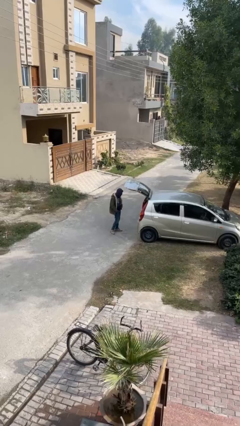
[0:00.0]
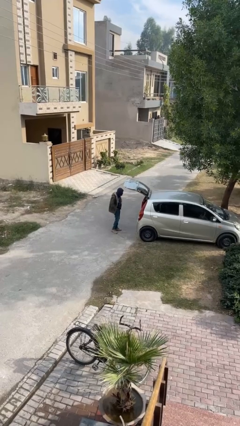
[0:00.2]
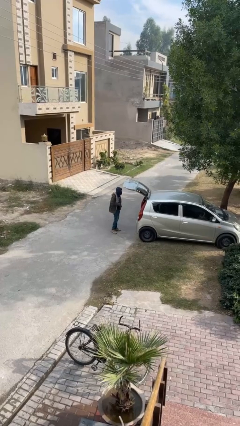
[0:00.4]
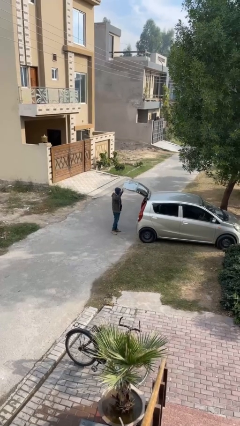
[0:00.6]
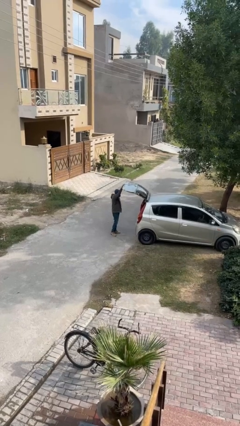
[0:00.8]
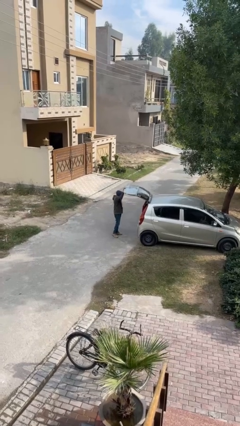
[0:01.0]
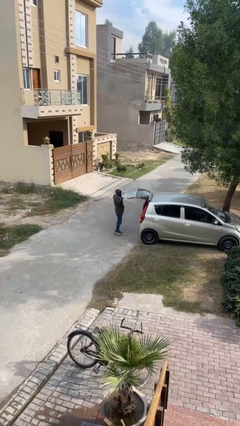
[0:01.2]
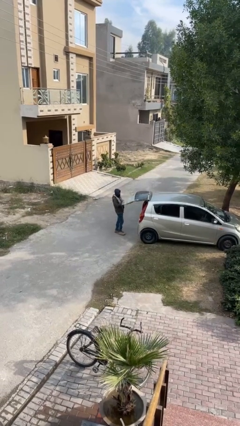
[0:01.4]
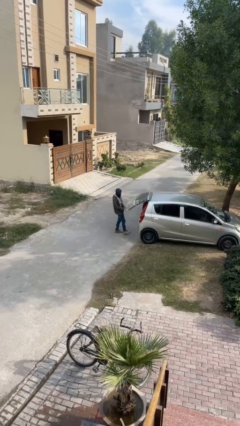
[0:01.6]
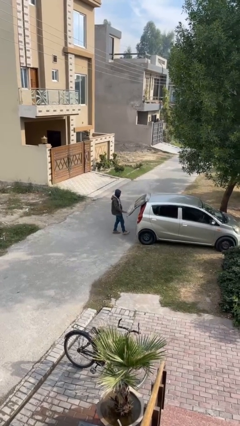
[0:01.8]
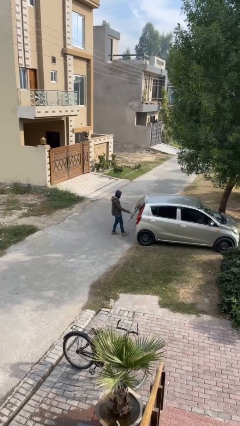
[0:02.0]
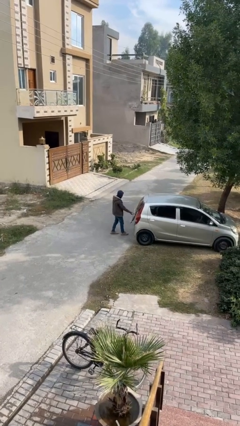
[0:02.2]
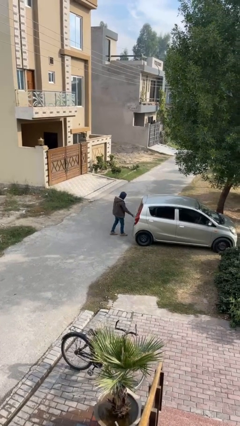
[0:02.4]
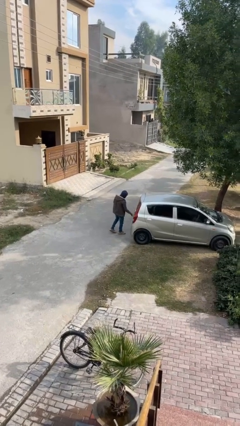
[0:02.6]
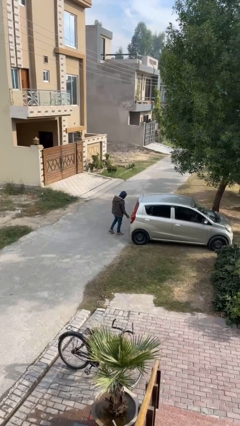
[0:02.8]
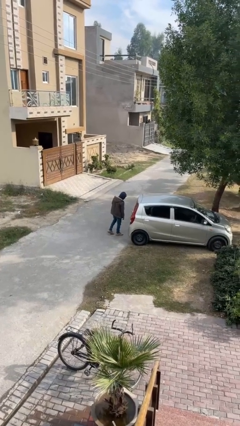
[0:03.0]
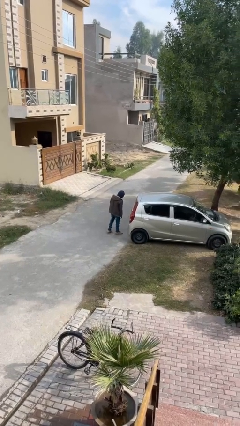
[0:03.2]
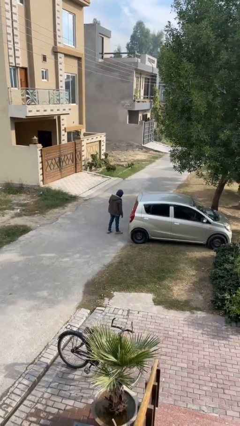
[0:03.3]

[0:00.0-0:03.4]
person closes car trunk

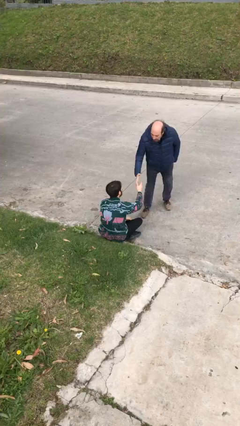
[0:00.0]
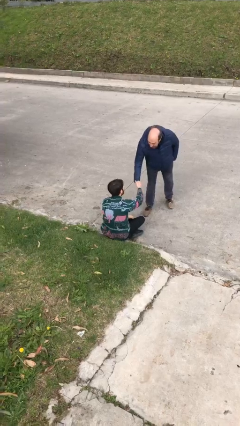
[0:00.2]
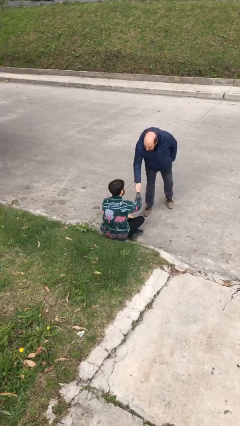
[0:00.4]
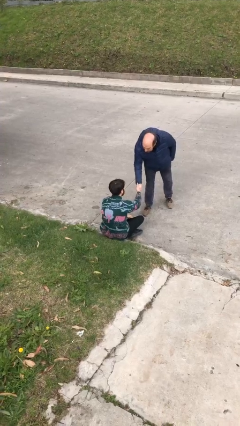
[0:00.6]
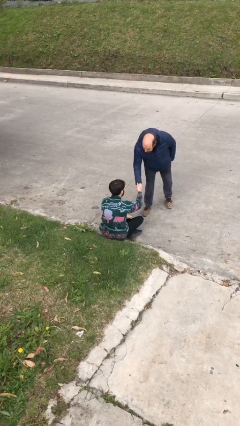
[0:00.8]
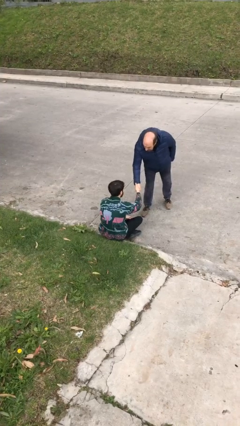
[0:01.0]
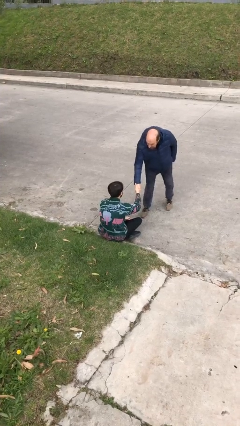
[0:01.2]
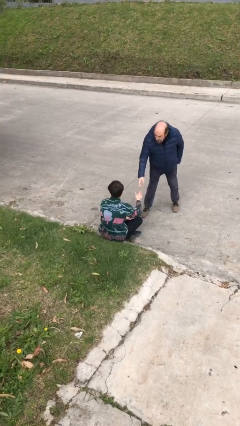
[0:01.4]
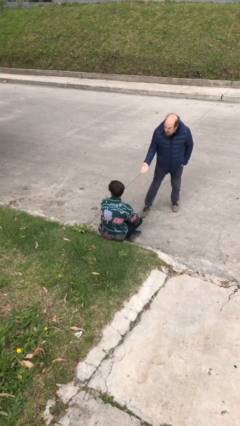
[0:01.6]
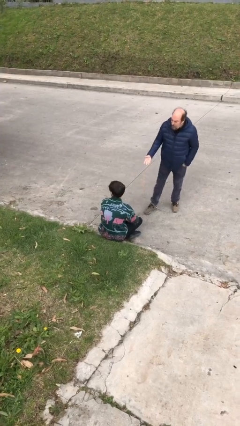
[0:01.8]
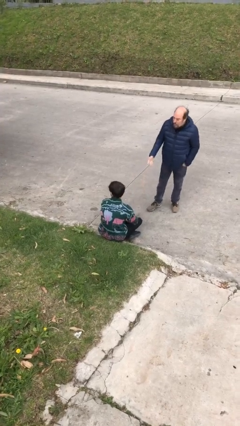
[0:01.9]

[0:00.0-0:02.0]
person shakes hand

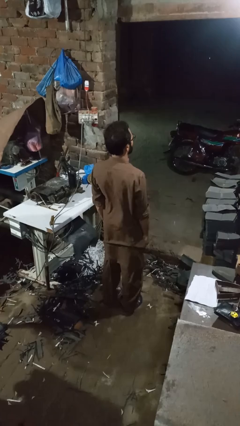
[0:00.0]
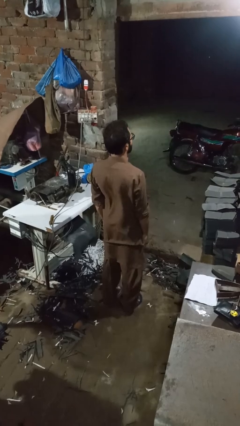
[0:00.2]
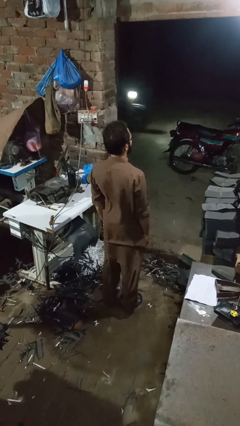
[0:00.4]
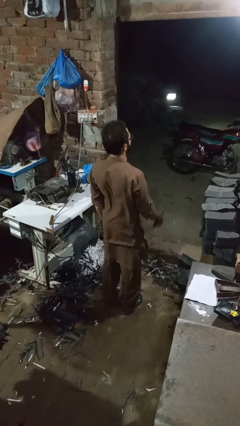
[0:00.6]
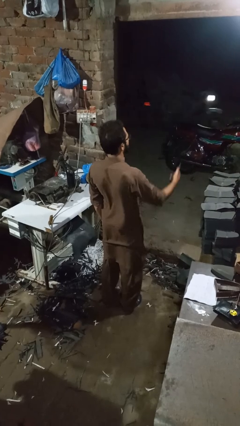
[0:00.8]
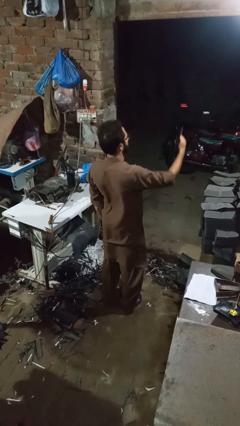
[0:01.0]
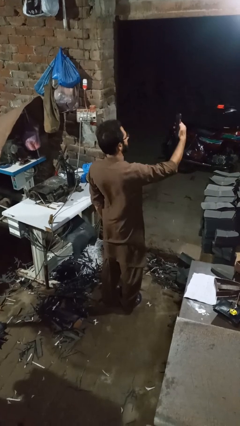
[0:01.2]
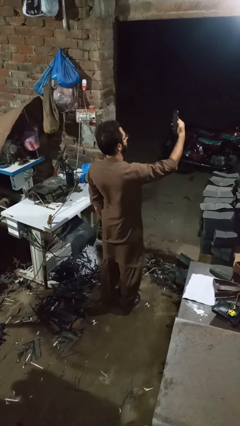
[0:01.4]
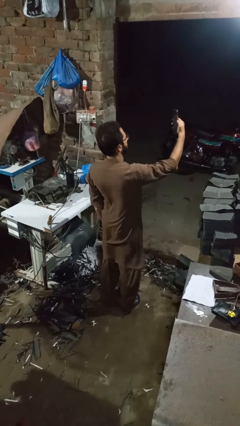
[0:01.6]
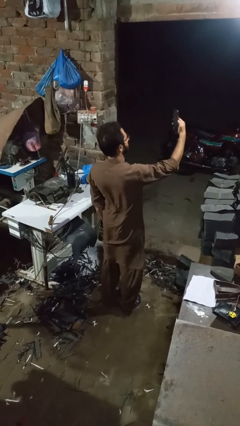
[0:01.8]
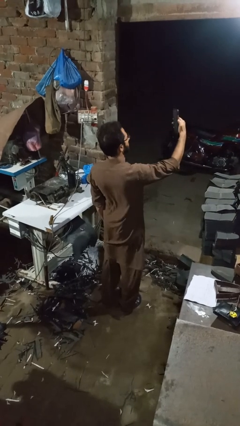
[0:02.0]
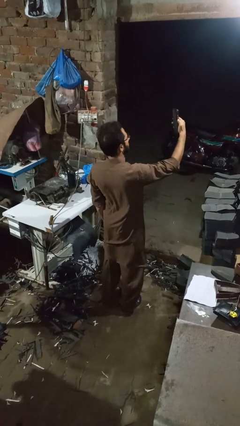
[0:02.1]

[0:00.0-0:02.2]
person takes selfie

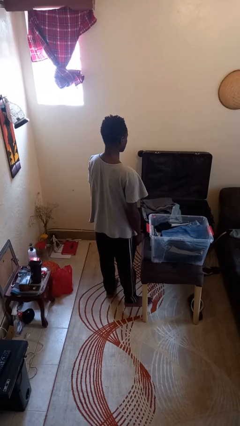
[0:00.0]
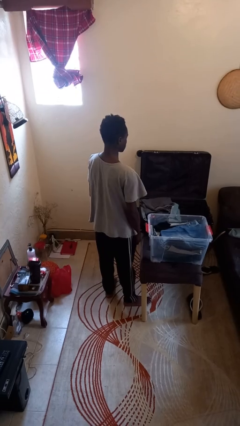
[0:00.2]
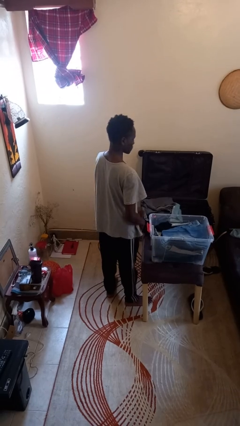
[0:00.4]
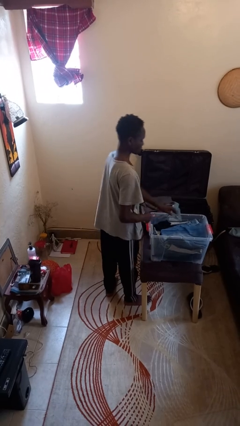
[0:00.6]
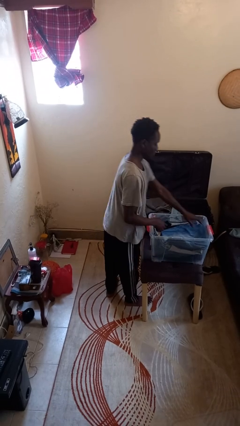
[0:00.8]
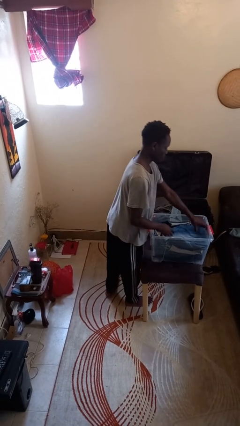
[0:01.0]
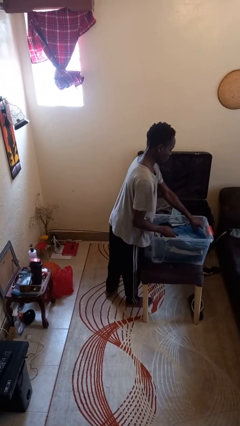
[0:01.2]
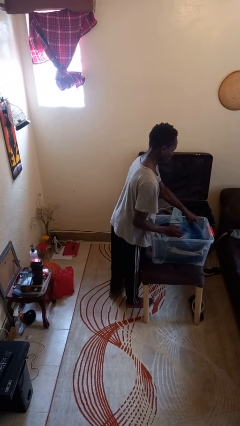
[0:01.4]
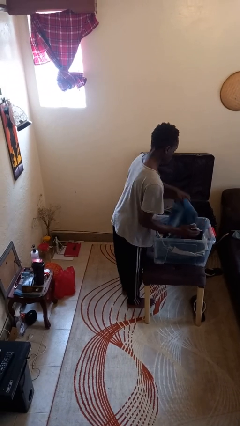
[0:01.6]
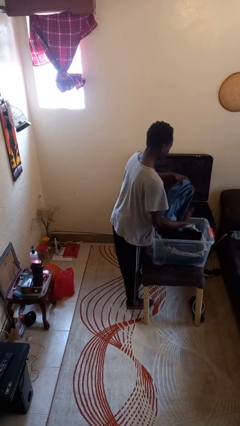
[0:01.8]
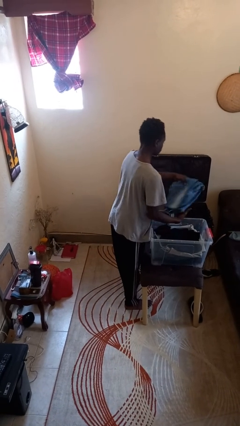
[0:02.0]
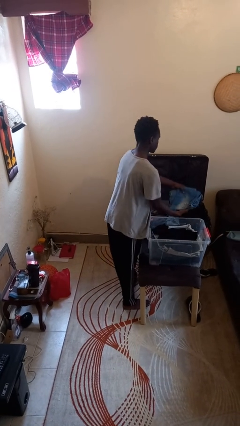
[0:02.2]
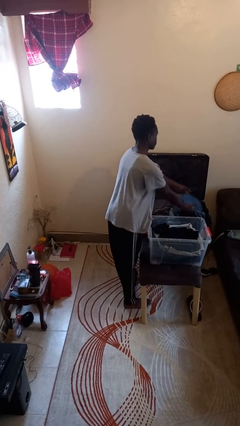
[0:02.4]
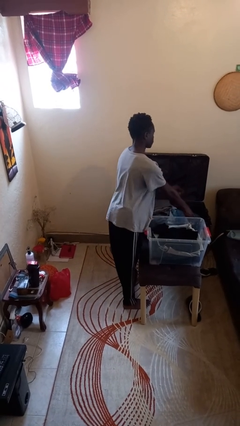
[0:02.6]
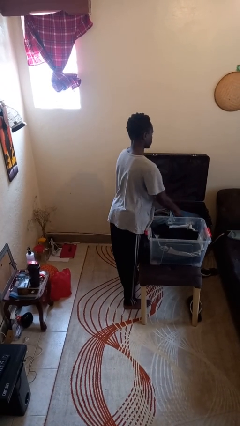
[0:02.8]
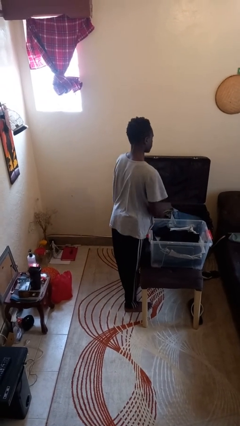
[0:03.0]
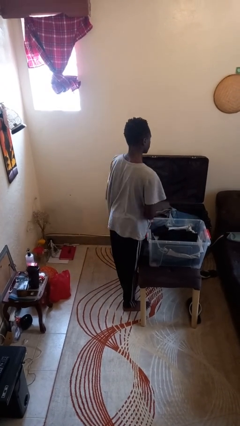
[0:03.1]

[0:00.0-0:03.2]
person loads clothes into suitcase

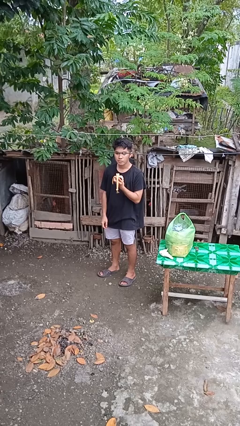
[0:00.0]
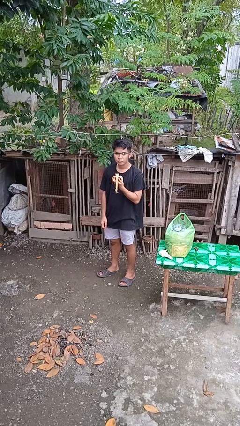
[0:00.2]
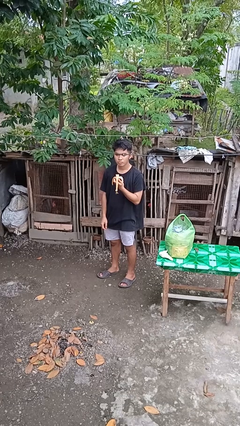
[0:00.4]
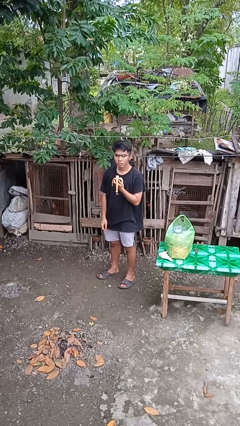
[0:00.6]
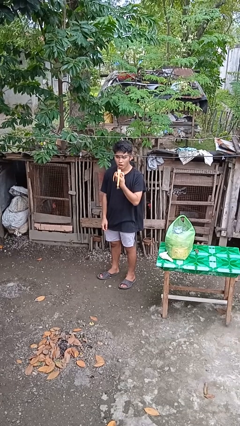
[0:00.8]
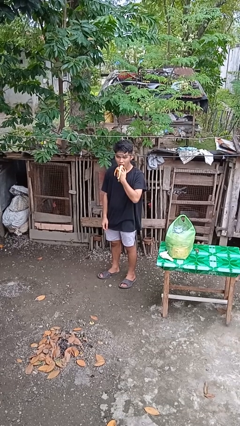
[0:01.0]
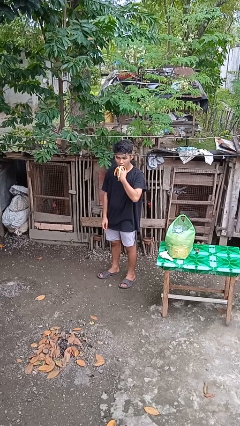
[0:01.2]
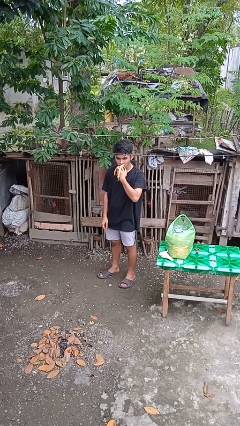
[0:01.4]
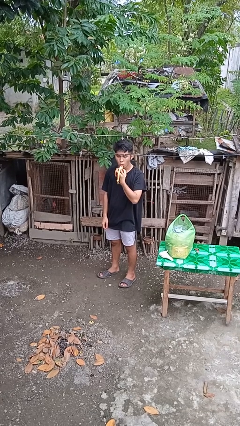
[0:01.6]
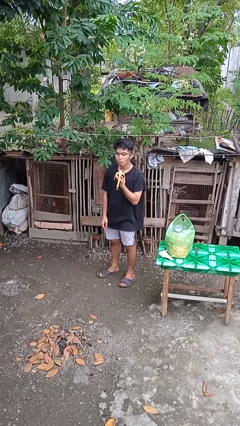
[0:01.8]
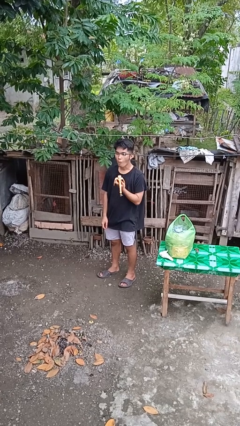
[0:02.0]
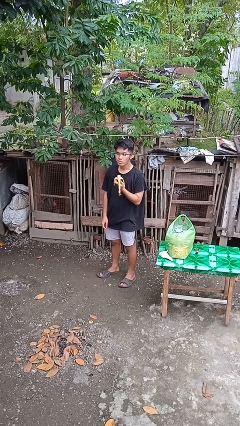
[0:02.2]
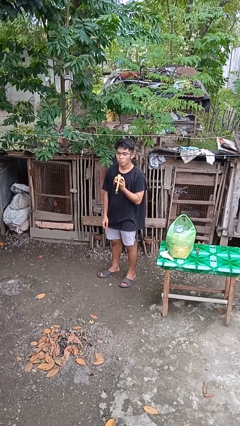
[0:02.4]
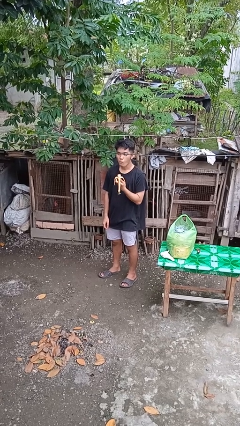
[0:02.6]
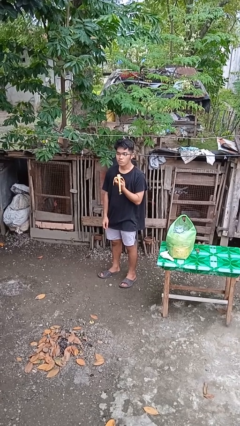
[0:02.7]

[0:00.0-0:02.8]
person eats banana

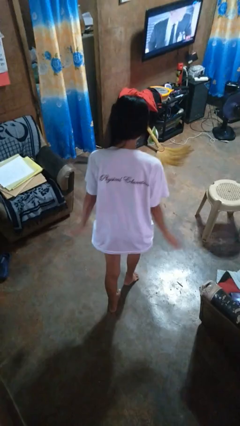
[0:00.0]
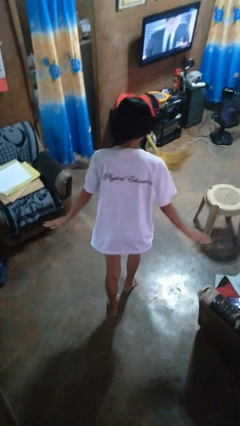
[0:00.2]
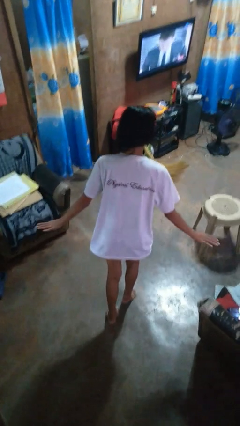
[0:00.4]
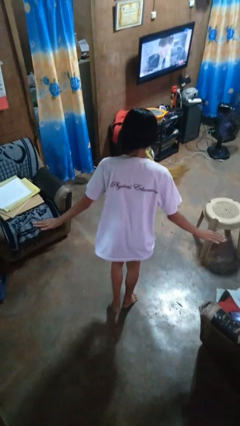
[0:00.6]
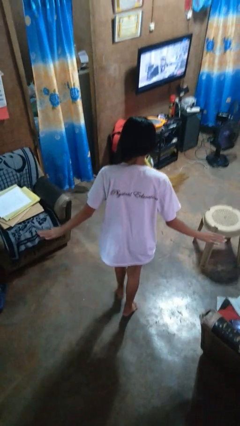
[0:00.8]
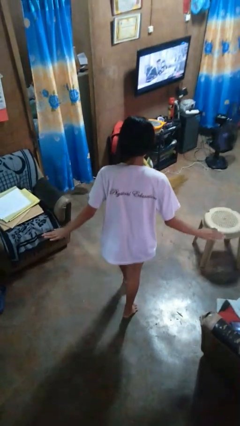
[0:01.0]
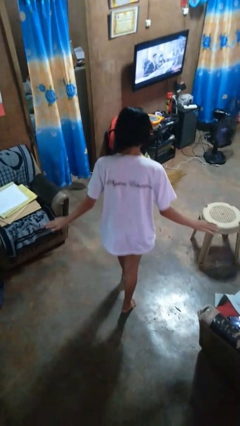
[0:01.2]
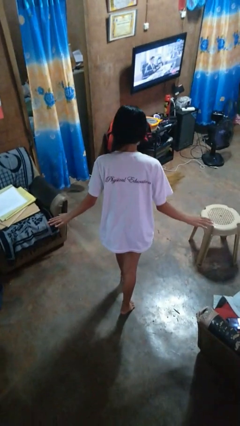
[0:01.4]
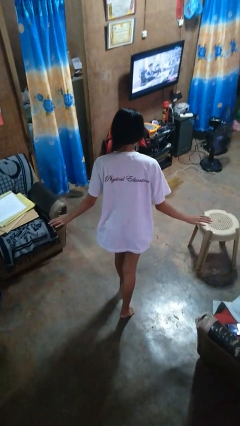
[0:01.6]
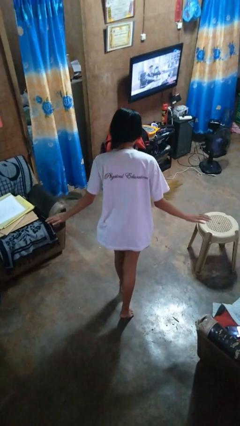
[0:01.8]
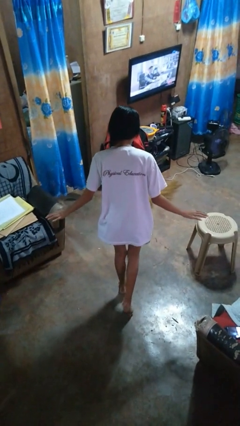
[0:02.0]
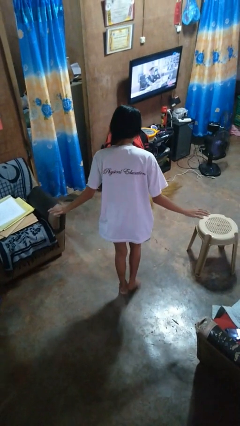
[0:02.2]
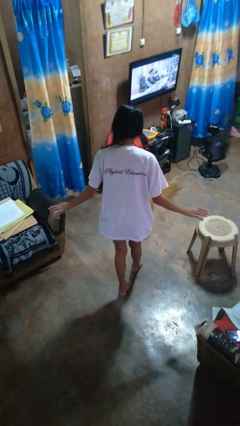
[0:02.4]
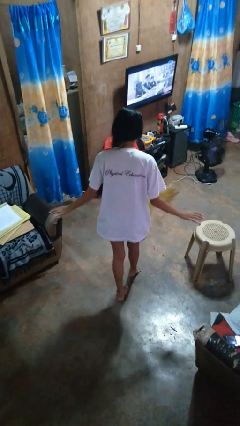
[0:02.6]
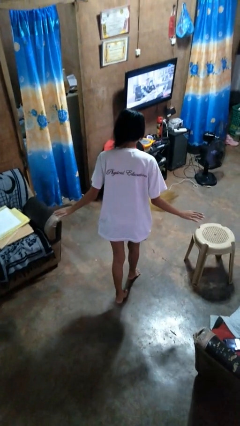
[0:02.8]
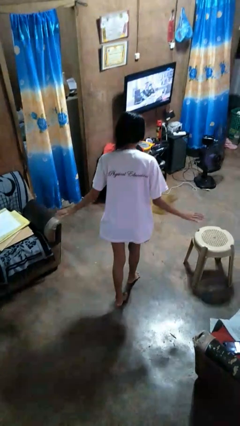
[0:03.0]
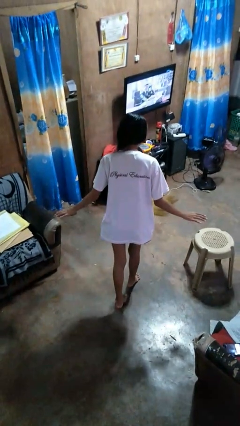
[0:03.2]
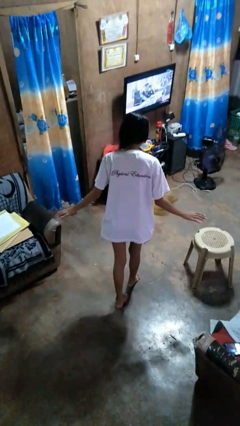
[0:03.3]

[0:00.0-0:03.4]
person walks tiptoe

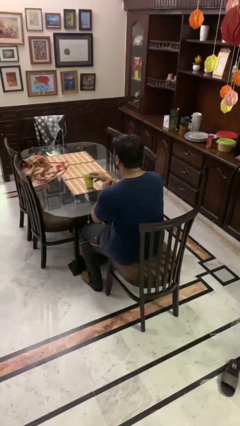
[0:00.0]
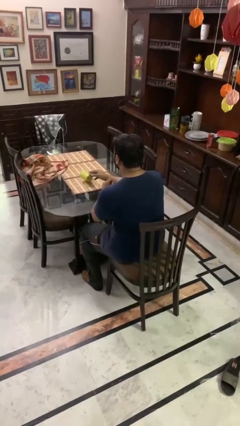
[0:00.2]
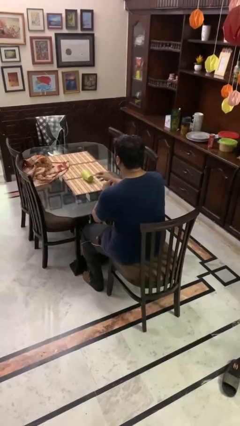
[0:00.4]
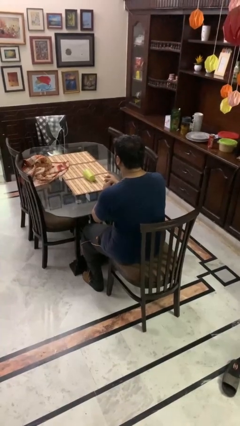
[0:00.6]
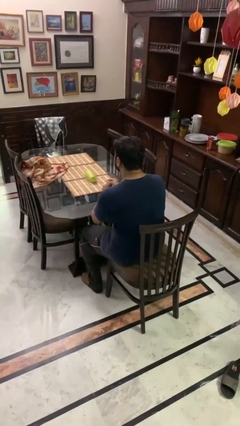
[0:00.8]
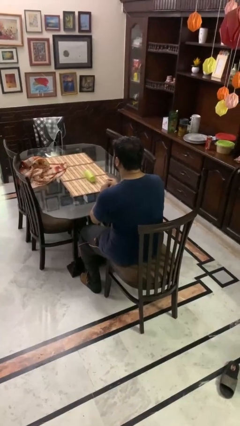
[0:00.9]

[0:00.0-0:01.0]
person knocks over glass
